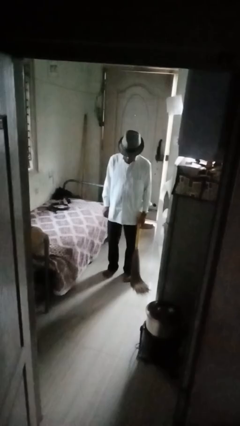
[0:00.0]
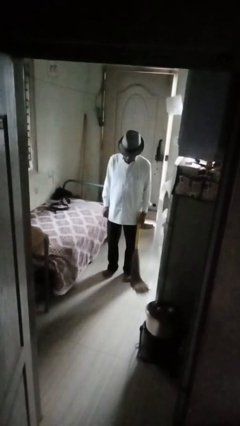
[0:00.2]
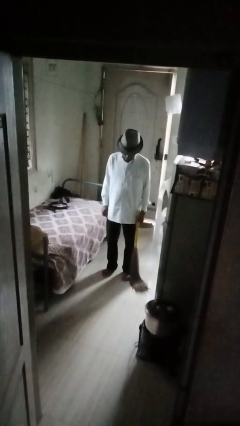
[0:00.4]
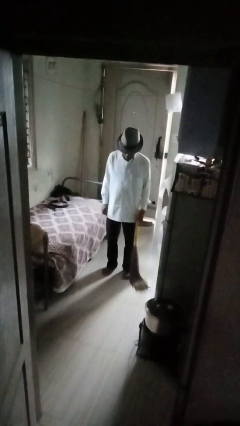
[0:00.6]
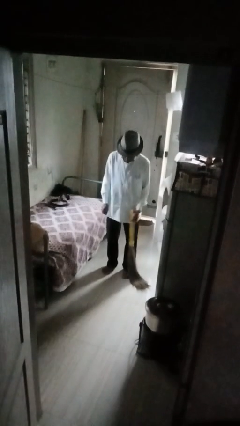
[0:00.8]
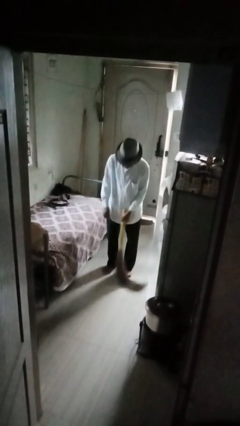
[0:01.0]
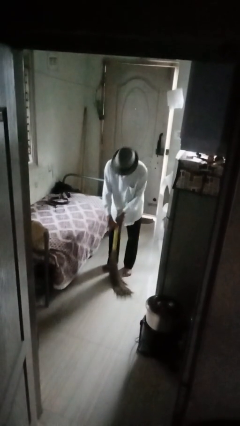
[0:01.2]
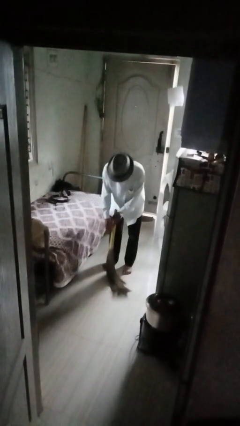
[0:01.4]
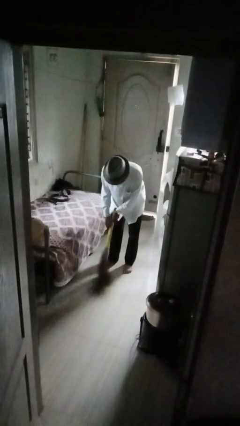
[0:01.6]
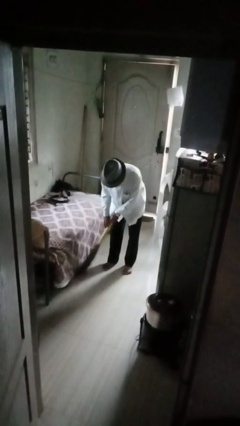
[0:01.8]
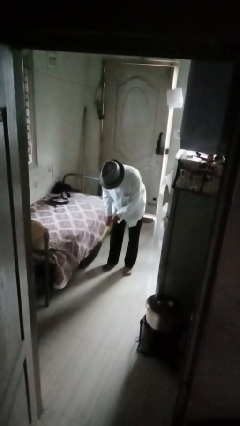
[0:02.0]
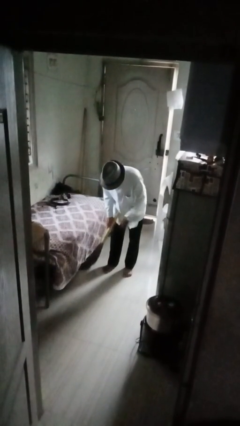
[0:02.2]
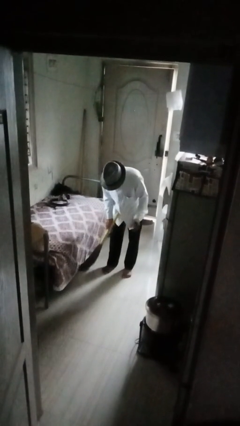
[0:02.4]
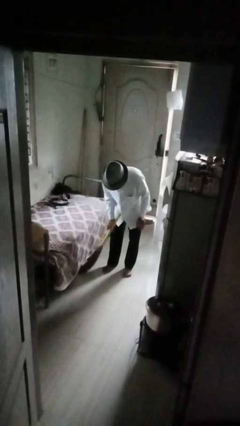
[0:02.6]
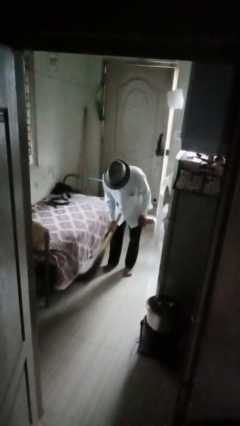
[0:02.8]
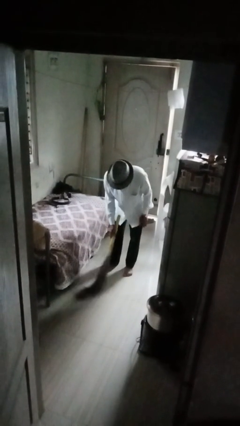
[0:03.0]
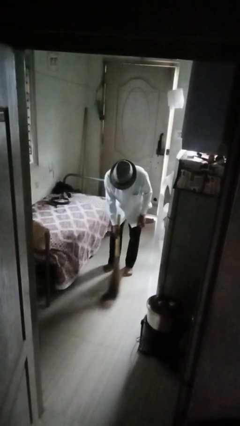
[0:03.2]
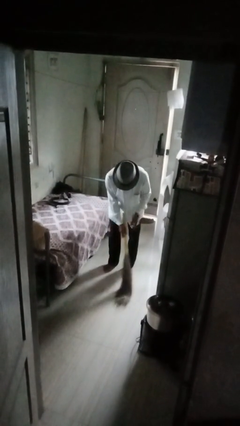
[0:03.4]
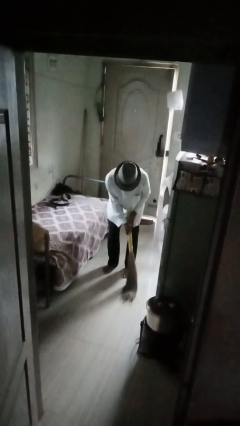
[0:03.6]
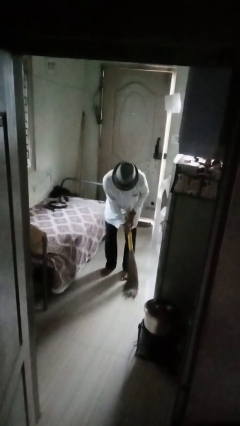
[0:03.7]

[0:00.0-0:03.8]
person sweeps floor

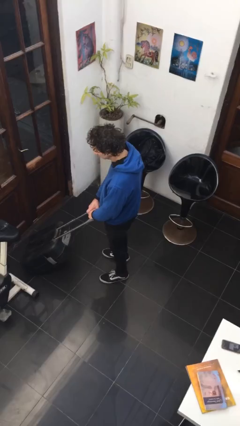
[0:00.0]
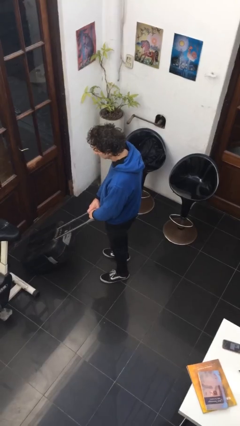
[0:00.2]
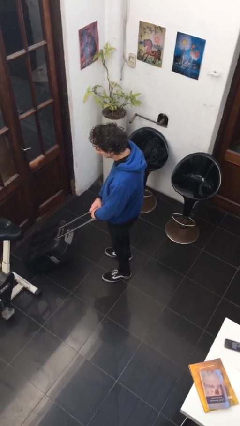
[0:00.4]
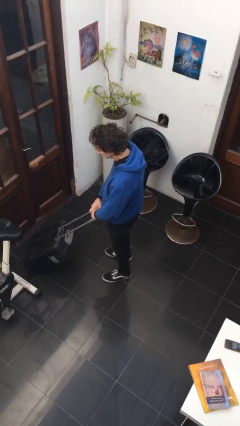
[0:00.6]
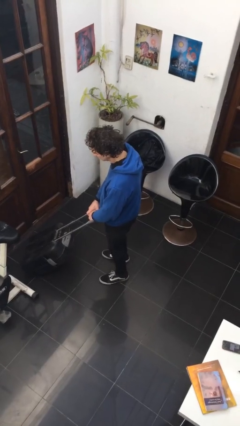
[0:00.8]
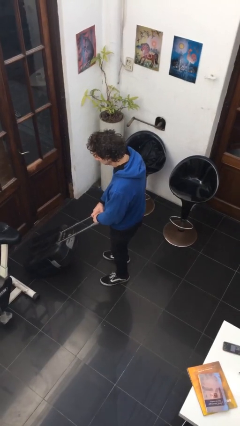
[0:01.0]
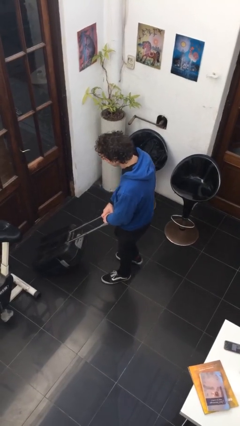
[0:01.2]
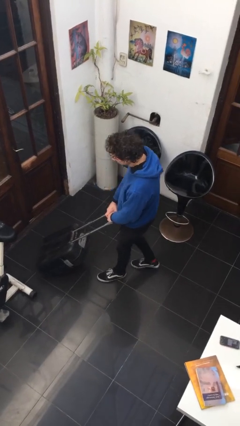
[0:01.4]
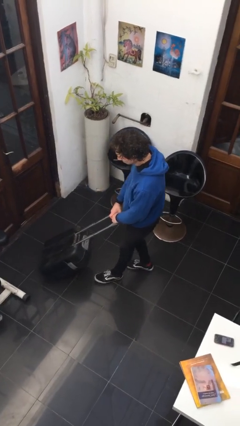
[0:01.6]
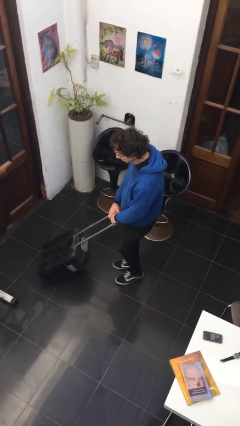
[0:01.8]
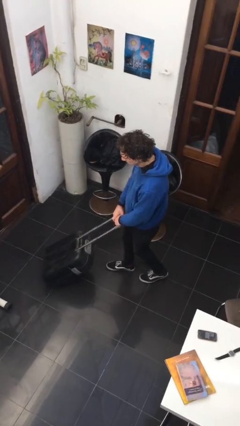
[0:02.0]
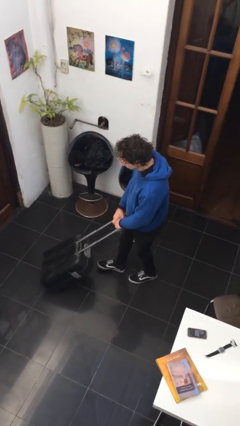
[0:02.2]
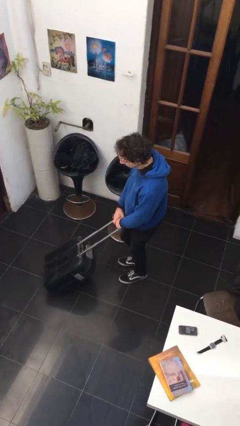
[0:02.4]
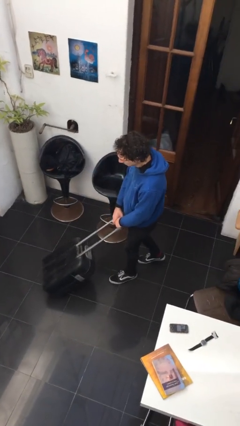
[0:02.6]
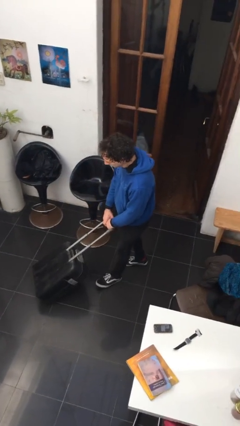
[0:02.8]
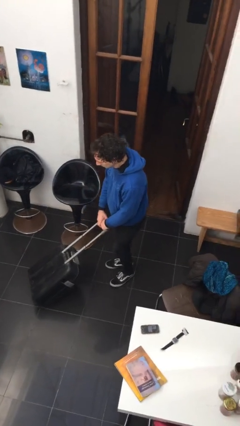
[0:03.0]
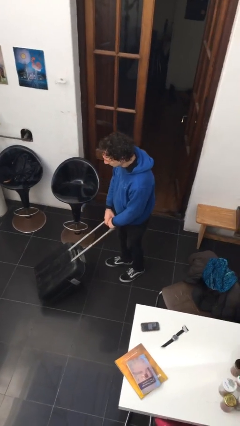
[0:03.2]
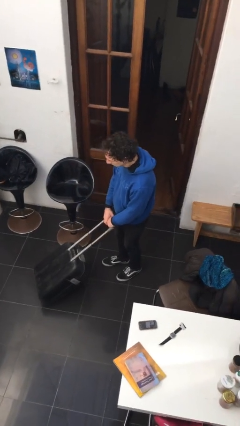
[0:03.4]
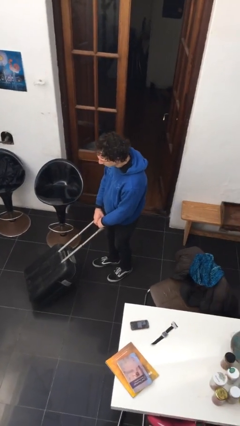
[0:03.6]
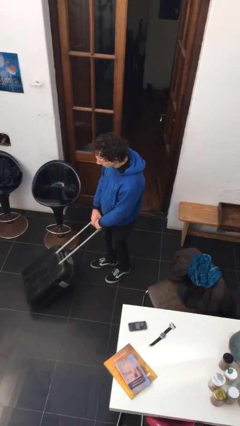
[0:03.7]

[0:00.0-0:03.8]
person pulls wheeled cart

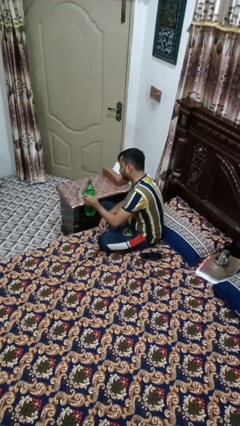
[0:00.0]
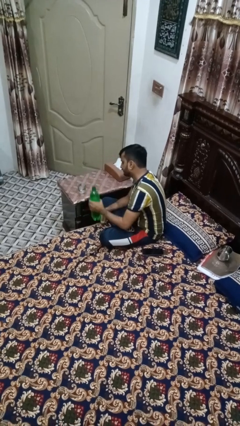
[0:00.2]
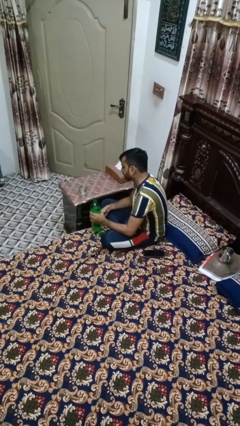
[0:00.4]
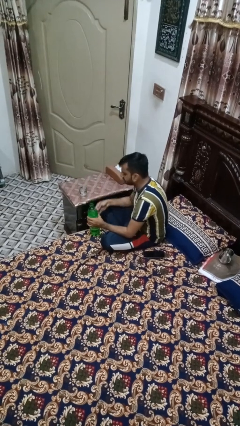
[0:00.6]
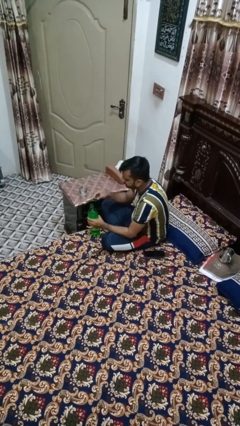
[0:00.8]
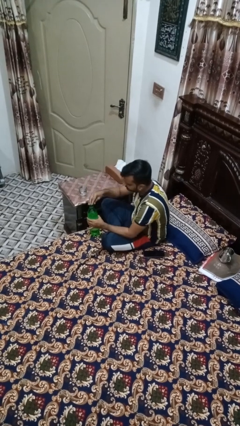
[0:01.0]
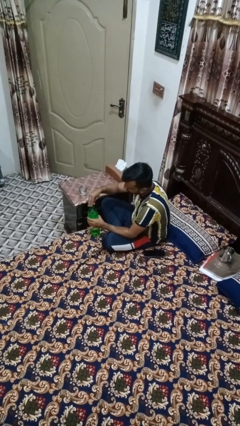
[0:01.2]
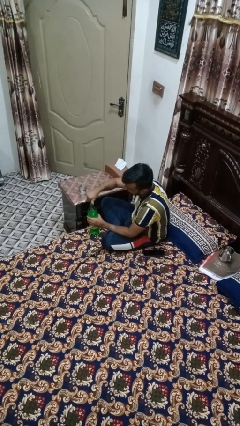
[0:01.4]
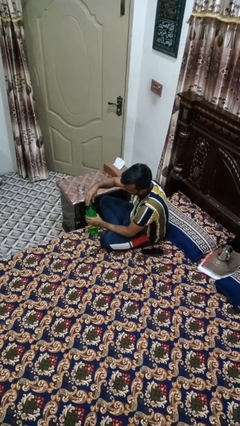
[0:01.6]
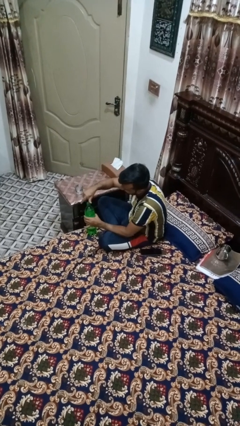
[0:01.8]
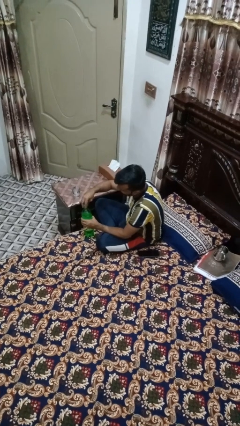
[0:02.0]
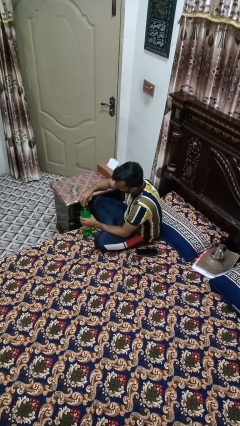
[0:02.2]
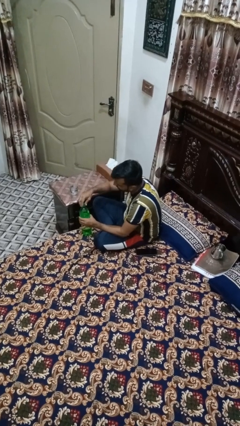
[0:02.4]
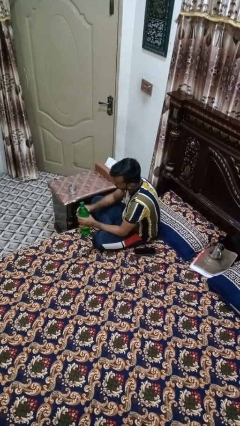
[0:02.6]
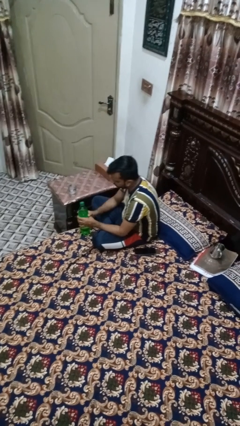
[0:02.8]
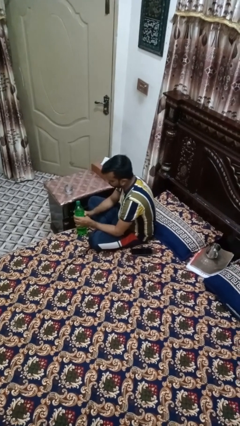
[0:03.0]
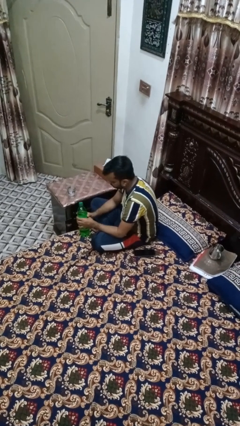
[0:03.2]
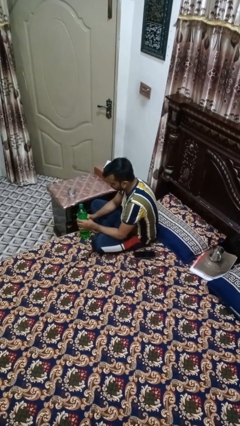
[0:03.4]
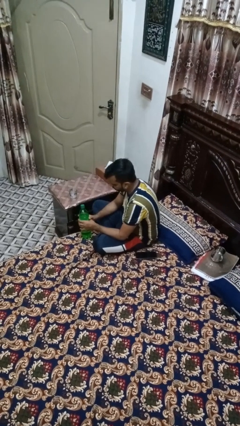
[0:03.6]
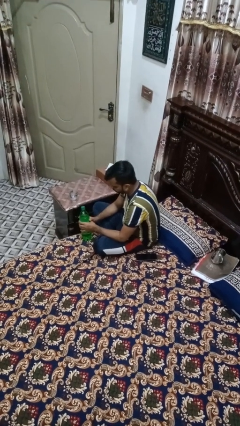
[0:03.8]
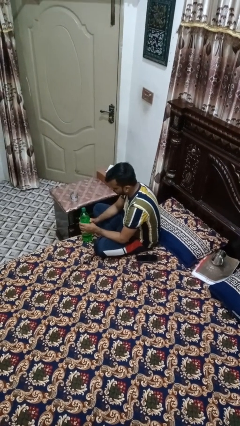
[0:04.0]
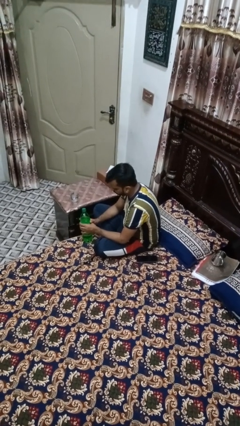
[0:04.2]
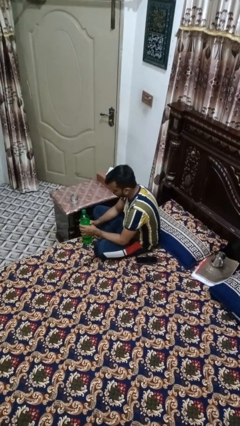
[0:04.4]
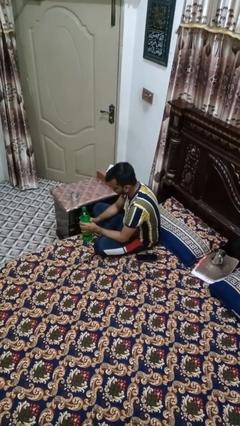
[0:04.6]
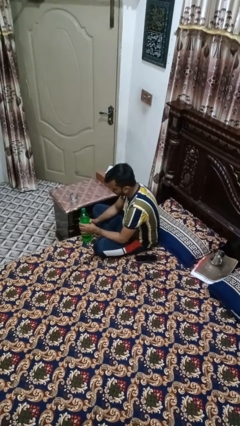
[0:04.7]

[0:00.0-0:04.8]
person screws lid to bottle

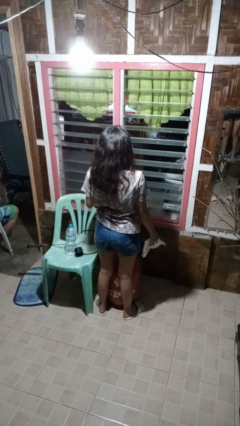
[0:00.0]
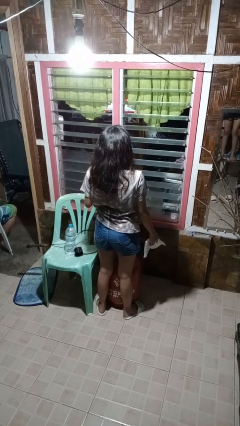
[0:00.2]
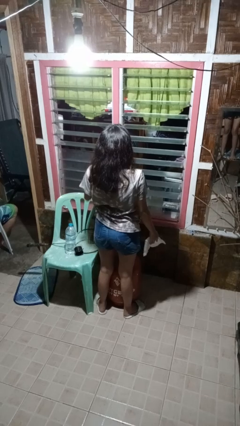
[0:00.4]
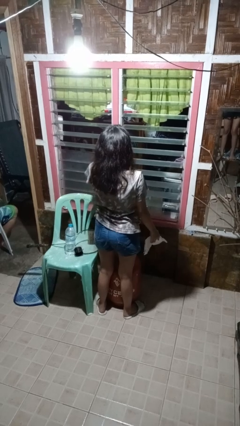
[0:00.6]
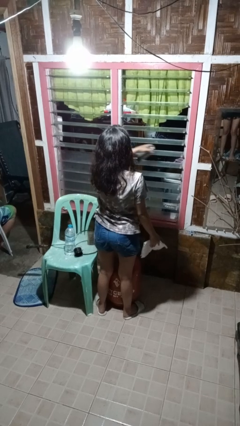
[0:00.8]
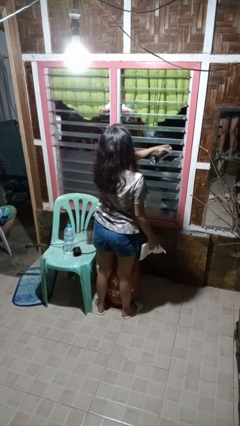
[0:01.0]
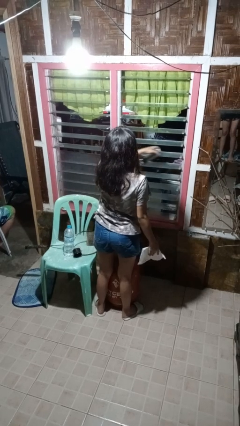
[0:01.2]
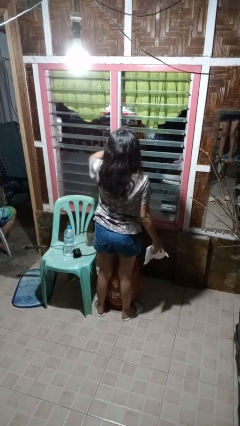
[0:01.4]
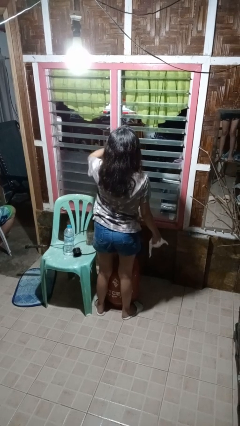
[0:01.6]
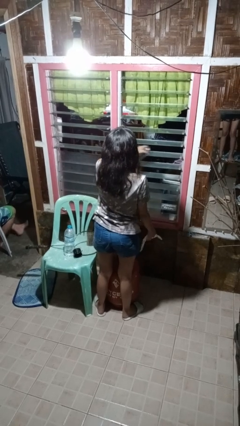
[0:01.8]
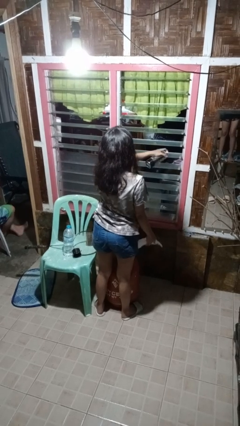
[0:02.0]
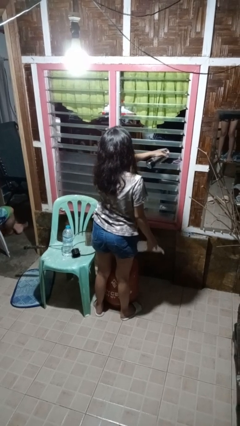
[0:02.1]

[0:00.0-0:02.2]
person sprays from bottle

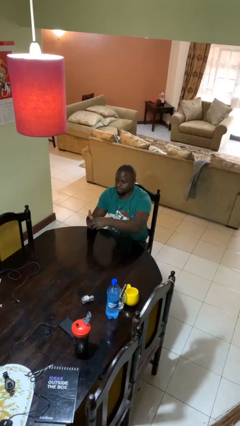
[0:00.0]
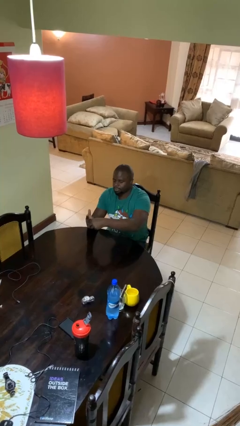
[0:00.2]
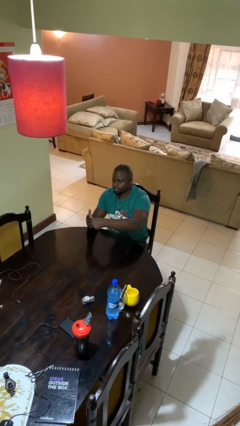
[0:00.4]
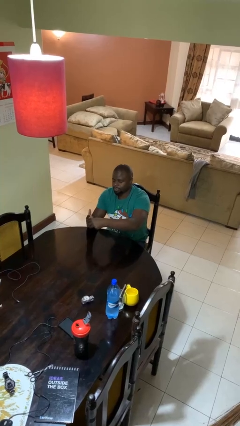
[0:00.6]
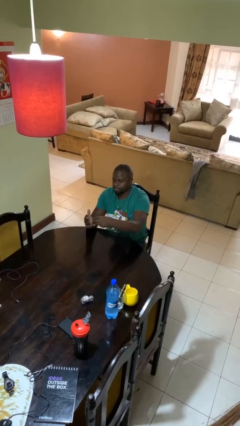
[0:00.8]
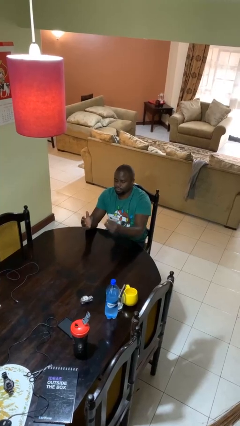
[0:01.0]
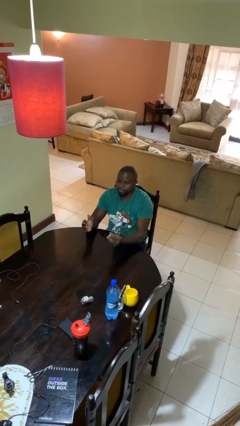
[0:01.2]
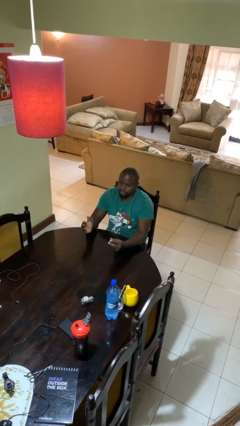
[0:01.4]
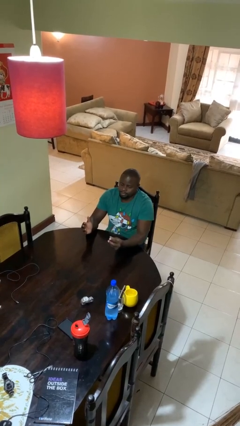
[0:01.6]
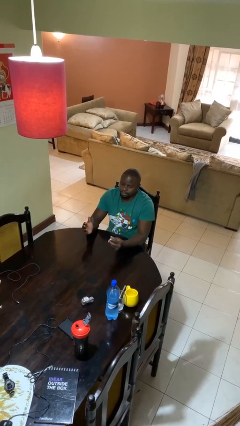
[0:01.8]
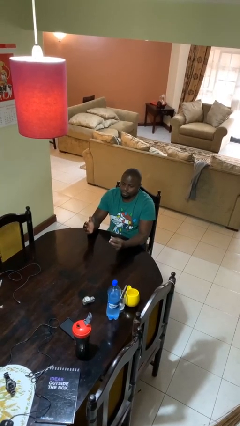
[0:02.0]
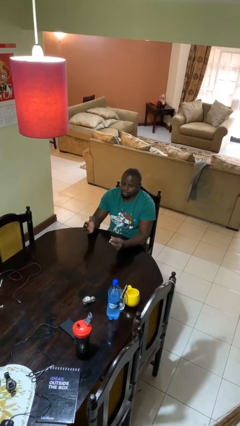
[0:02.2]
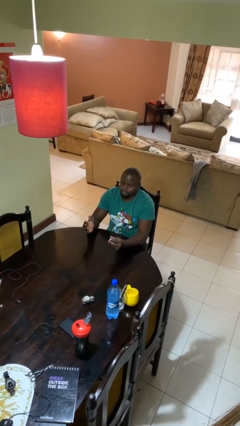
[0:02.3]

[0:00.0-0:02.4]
person takes off ring

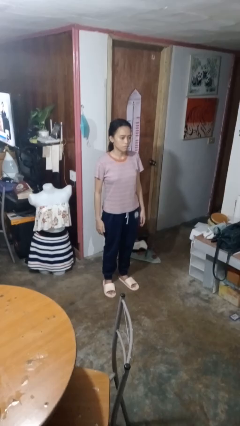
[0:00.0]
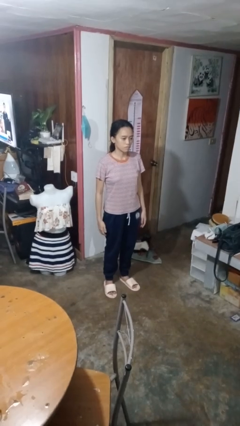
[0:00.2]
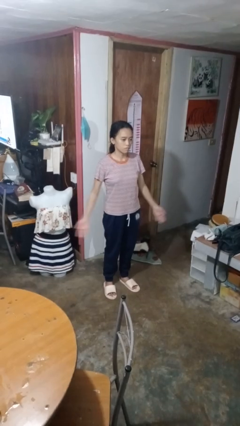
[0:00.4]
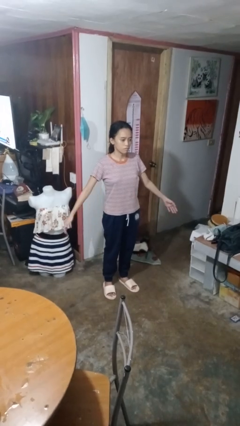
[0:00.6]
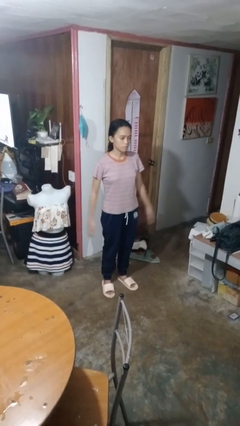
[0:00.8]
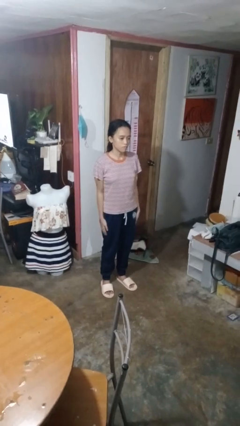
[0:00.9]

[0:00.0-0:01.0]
person slaps hands on thighs
